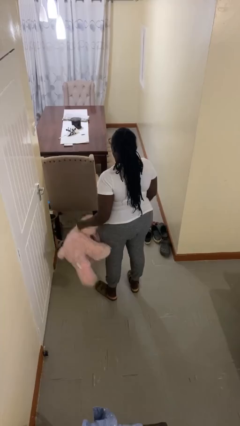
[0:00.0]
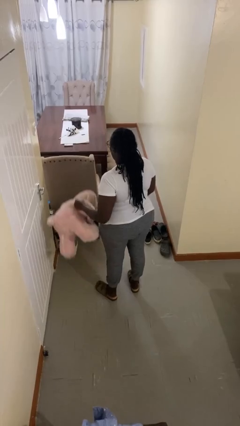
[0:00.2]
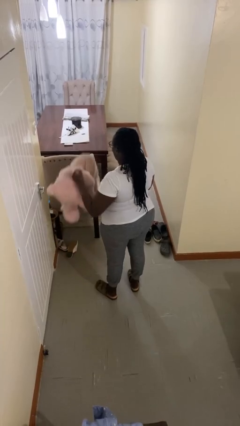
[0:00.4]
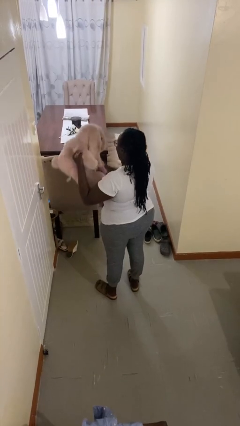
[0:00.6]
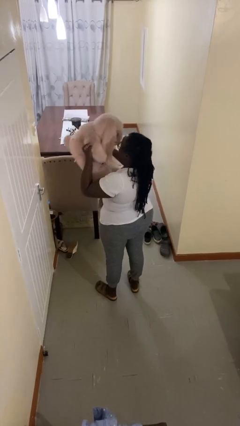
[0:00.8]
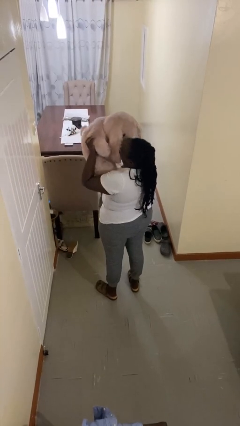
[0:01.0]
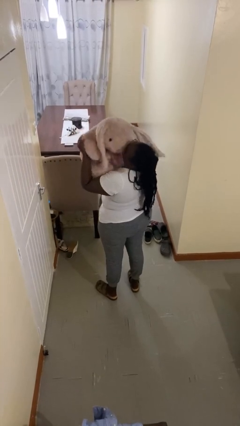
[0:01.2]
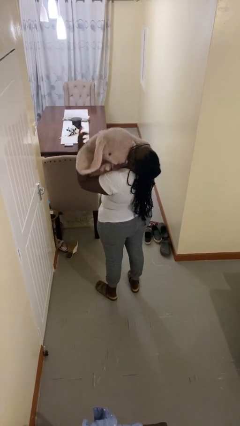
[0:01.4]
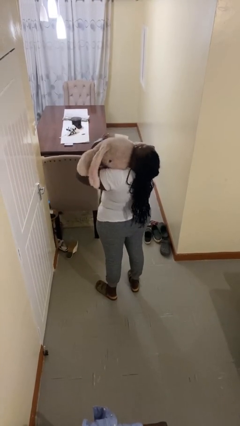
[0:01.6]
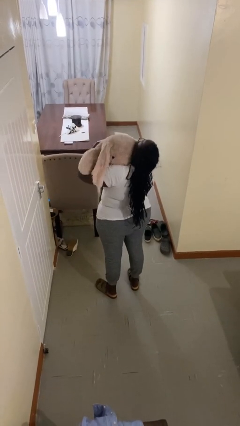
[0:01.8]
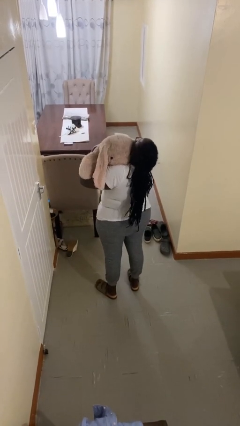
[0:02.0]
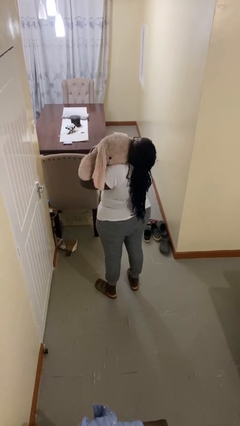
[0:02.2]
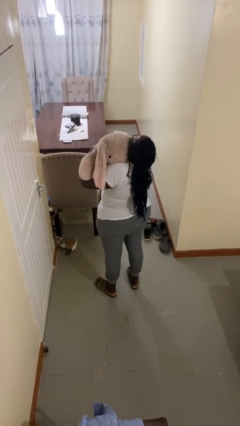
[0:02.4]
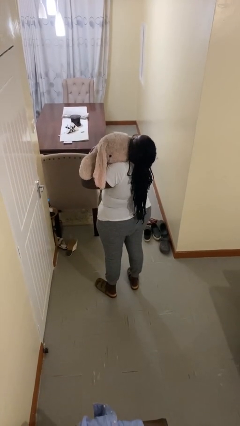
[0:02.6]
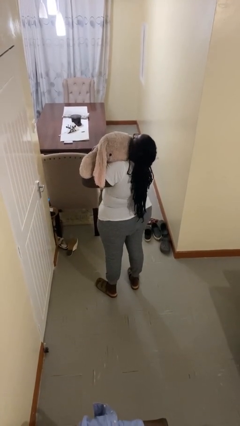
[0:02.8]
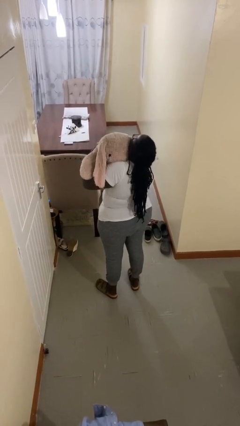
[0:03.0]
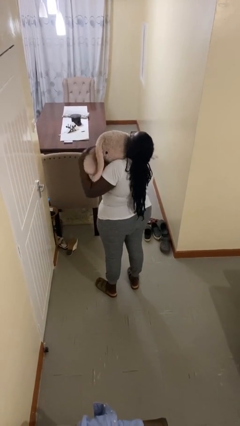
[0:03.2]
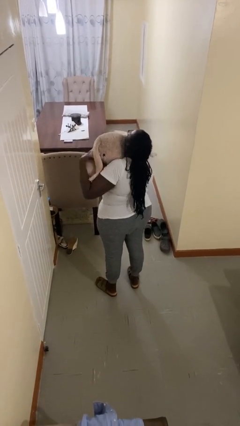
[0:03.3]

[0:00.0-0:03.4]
person hugs stuffed animal

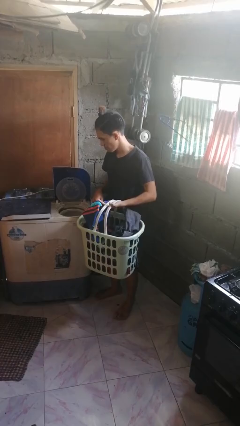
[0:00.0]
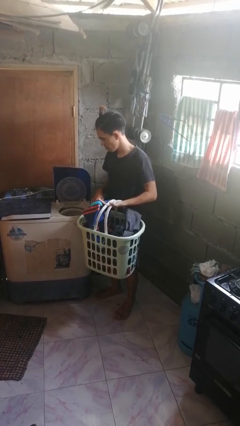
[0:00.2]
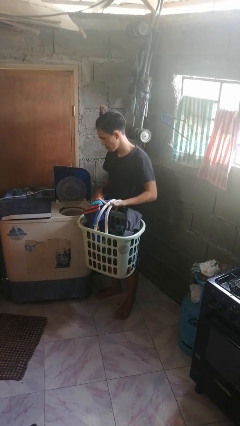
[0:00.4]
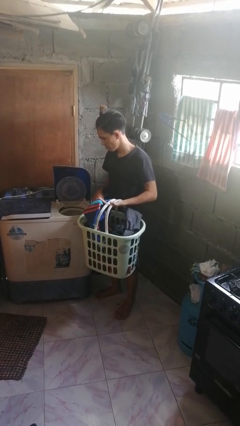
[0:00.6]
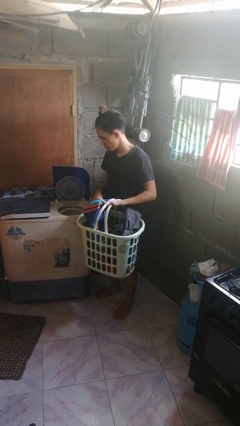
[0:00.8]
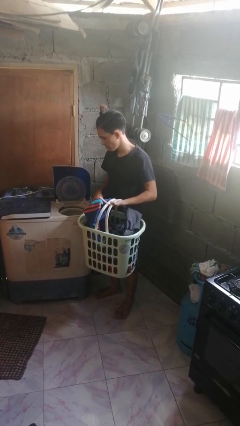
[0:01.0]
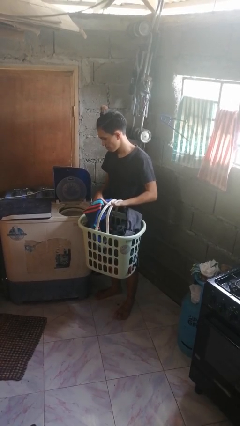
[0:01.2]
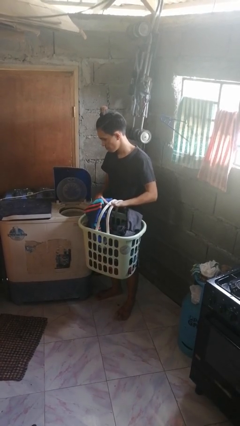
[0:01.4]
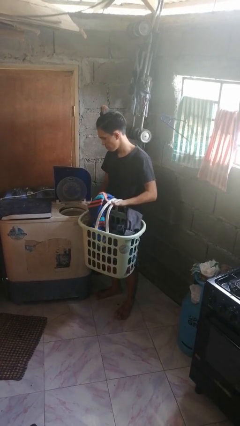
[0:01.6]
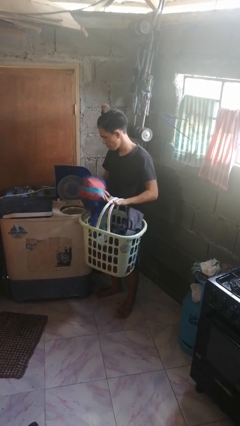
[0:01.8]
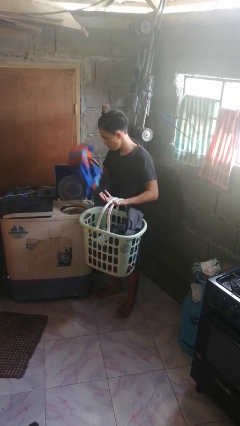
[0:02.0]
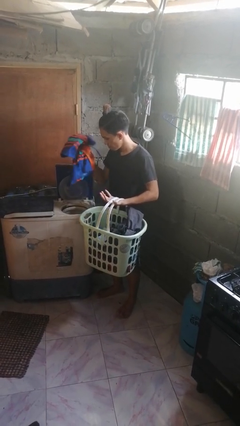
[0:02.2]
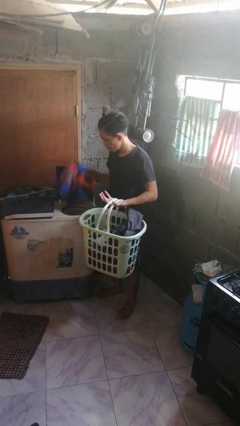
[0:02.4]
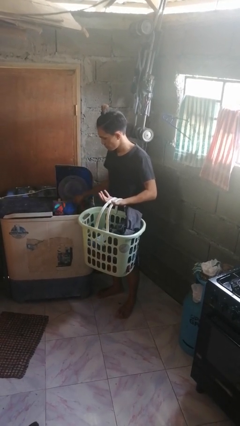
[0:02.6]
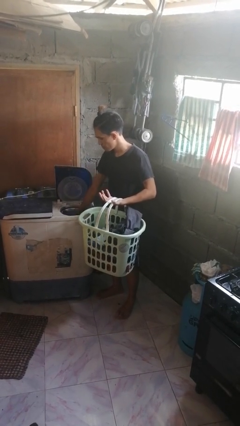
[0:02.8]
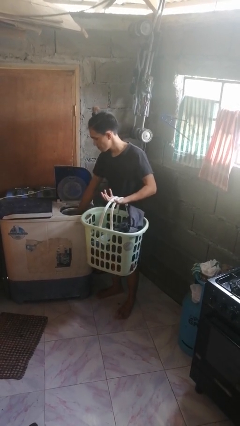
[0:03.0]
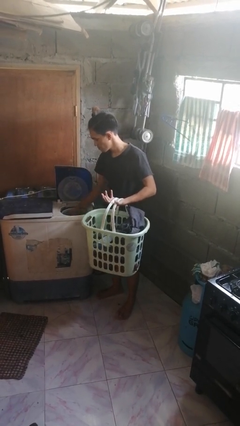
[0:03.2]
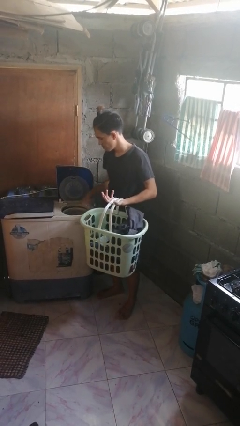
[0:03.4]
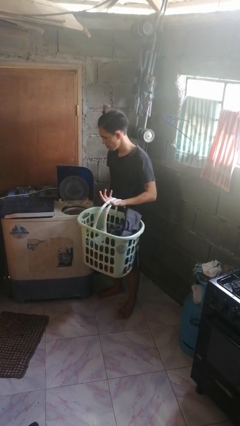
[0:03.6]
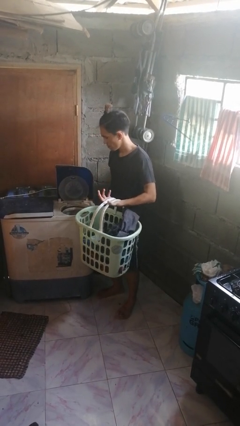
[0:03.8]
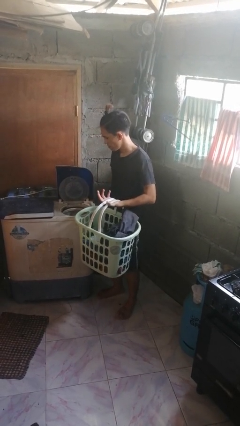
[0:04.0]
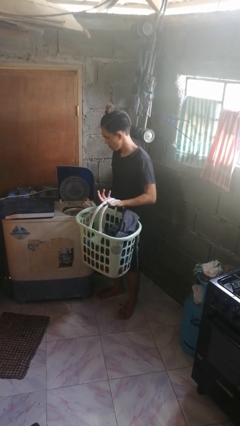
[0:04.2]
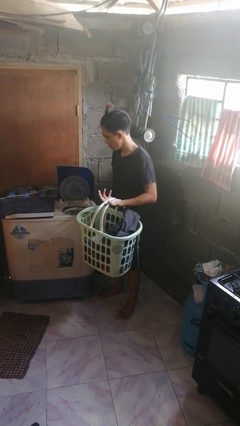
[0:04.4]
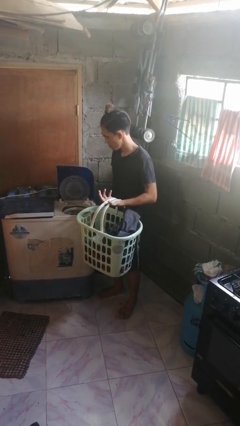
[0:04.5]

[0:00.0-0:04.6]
person loads dryer

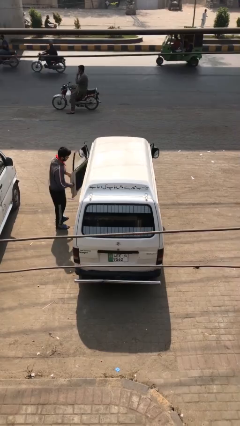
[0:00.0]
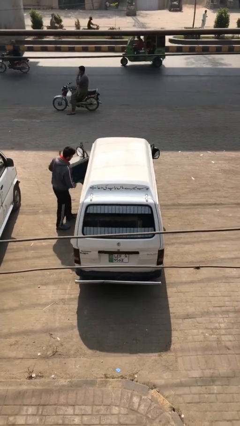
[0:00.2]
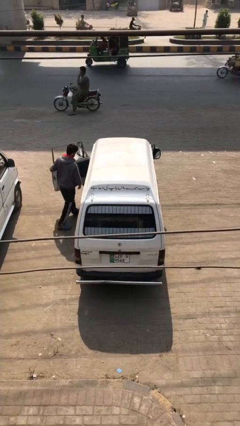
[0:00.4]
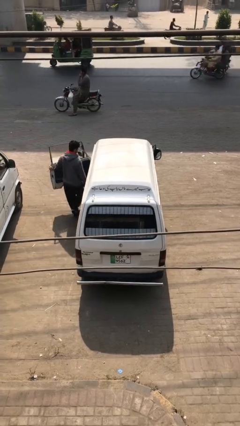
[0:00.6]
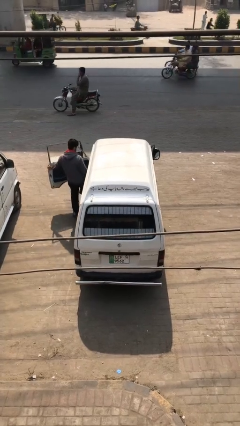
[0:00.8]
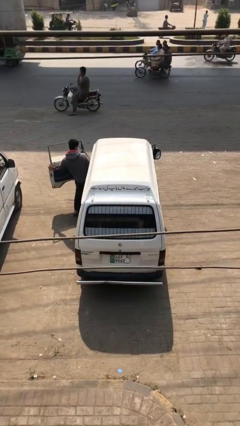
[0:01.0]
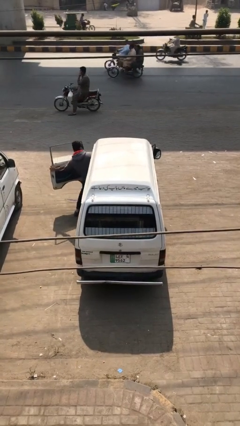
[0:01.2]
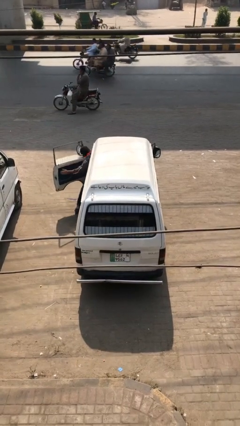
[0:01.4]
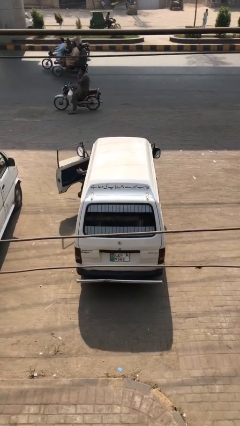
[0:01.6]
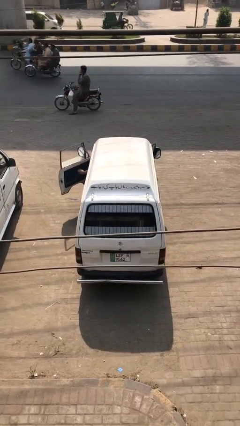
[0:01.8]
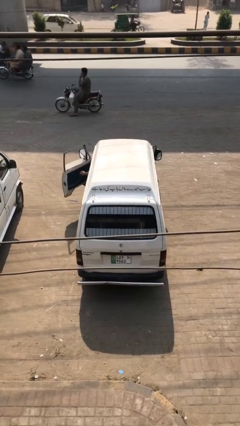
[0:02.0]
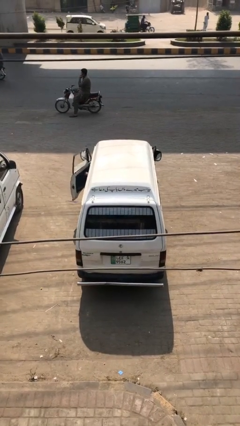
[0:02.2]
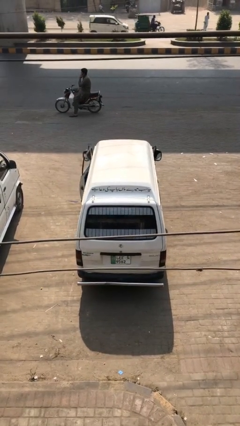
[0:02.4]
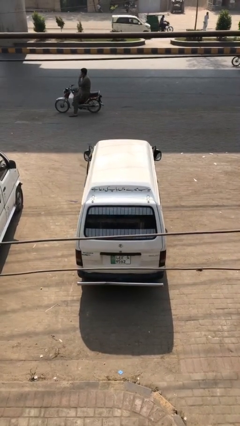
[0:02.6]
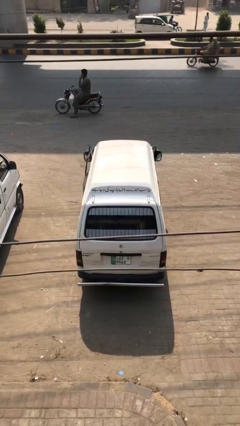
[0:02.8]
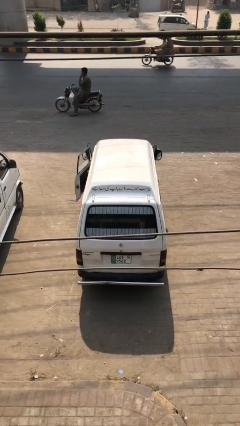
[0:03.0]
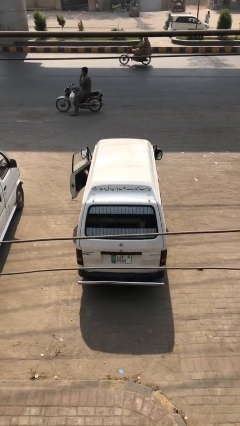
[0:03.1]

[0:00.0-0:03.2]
car picks up person

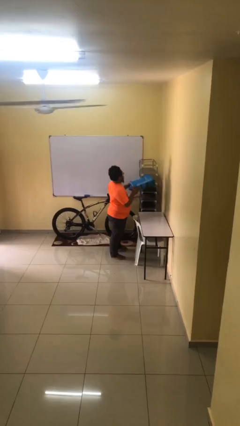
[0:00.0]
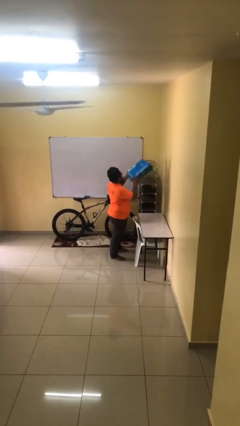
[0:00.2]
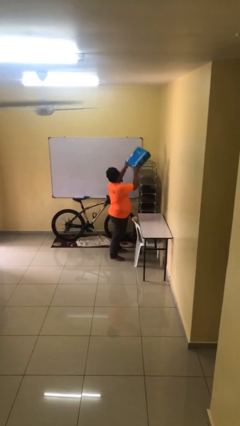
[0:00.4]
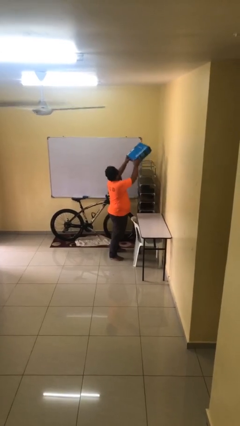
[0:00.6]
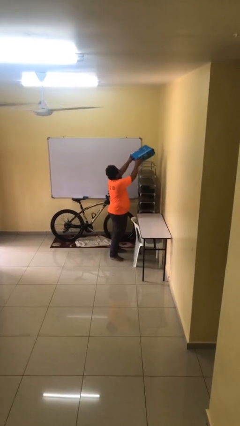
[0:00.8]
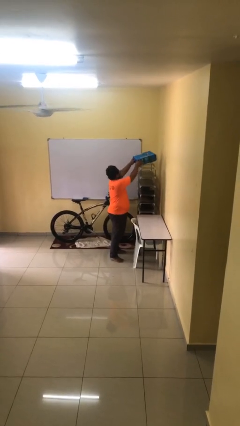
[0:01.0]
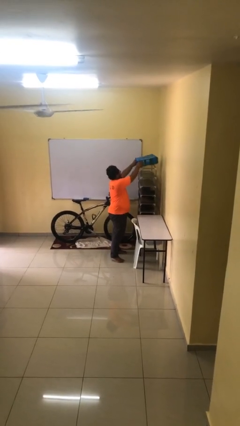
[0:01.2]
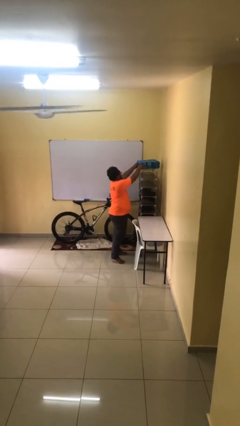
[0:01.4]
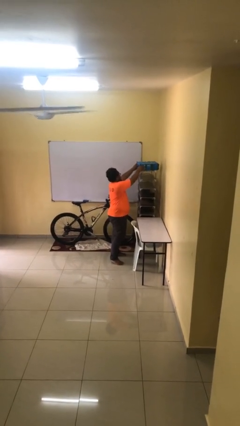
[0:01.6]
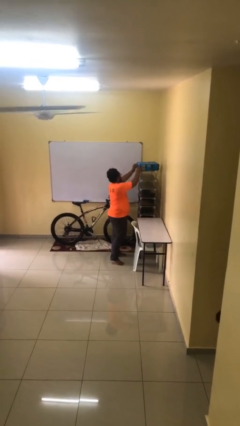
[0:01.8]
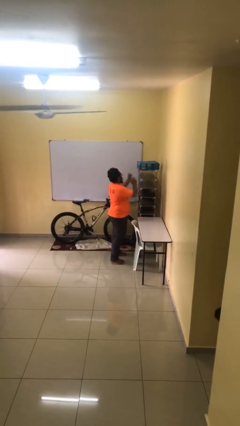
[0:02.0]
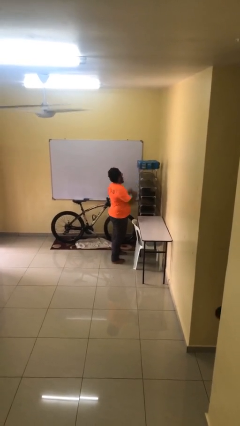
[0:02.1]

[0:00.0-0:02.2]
person puts down object on shelf

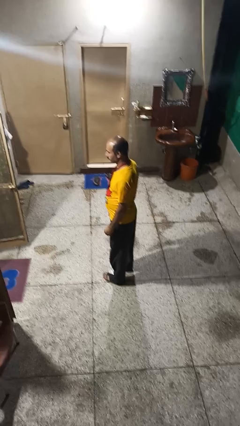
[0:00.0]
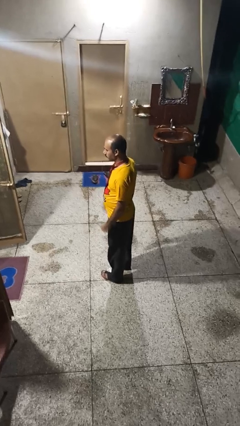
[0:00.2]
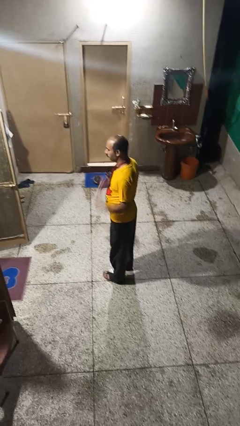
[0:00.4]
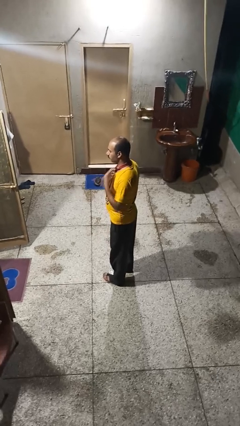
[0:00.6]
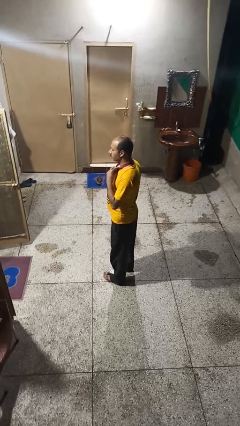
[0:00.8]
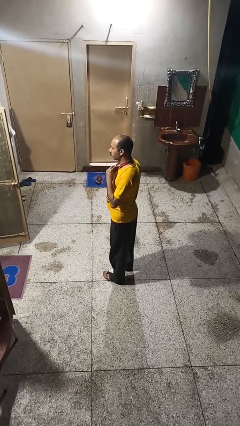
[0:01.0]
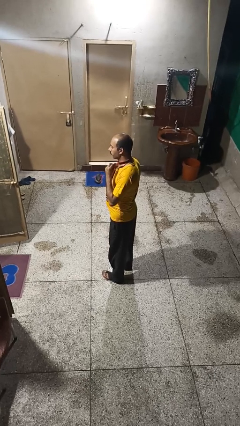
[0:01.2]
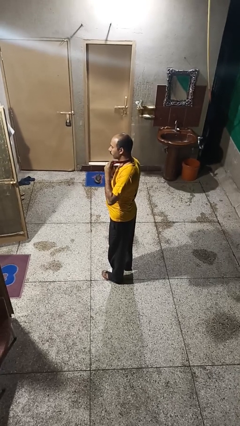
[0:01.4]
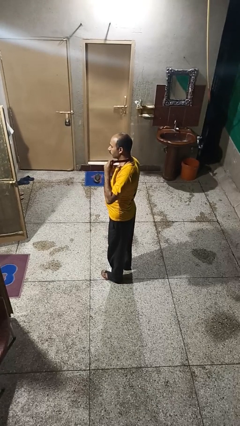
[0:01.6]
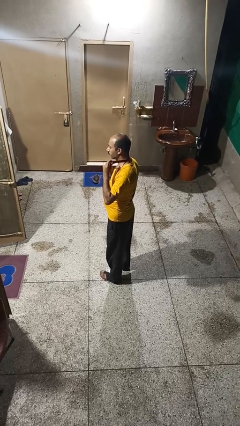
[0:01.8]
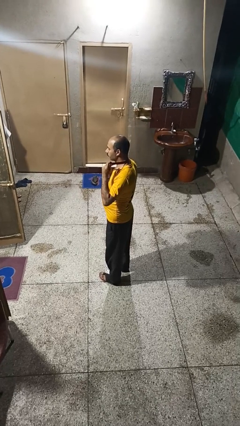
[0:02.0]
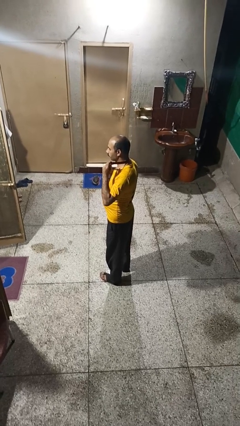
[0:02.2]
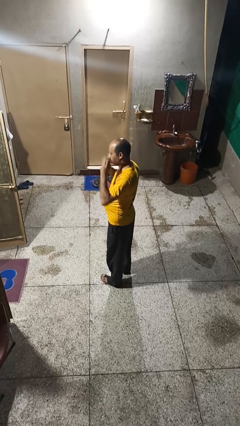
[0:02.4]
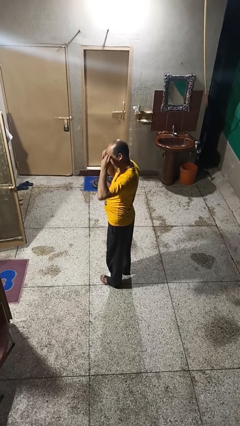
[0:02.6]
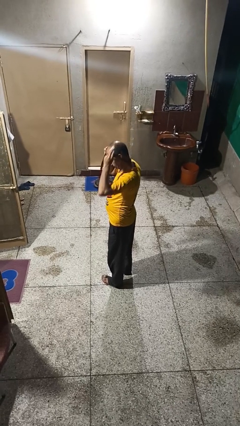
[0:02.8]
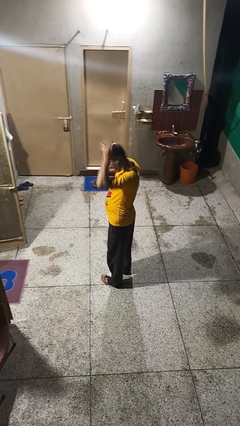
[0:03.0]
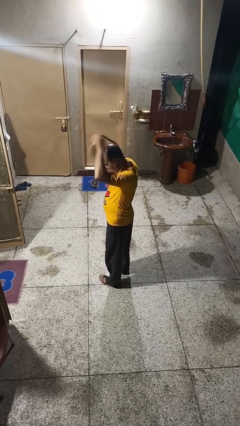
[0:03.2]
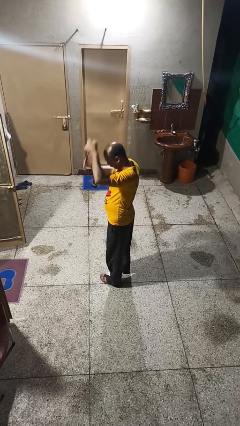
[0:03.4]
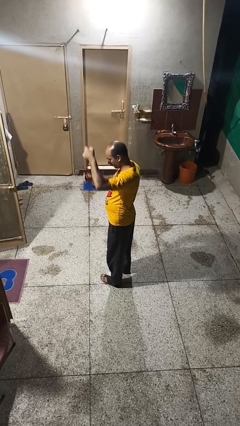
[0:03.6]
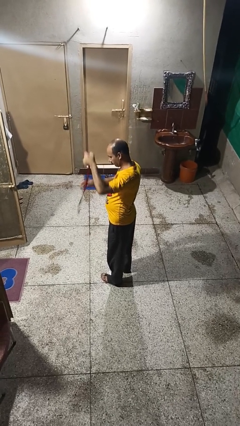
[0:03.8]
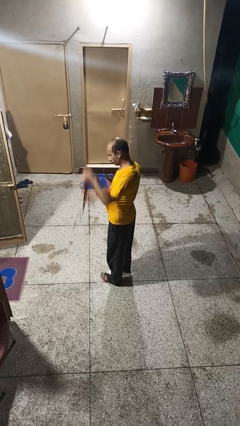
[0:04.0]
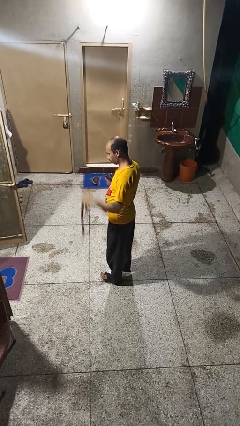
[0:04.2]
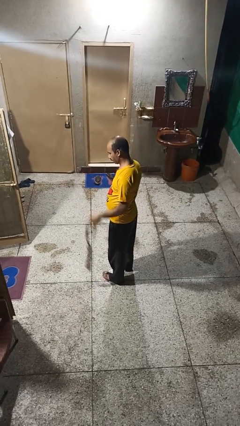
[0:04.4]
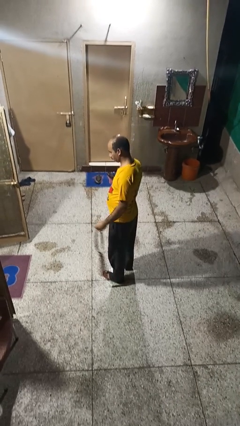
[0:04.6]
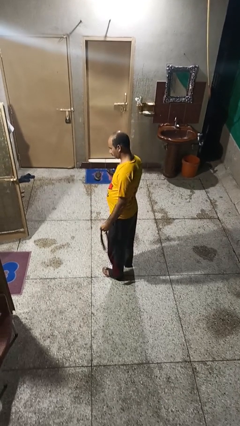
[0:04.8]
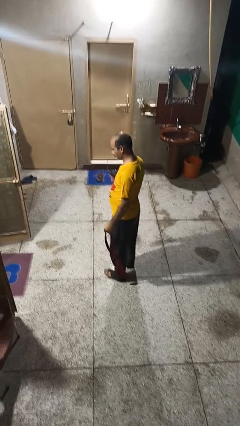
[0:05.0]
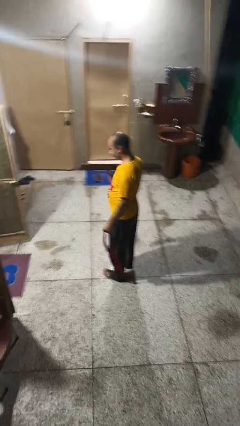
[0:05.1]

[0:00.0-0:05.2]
person takes off necktie
